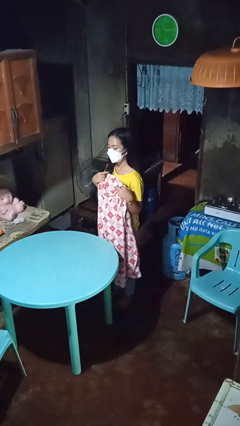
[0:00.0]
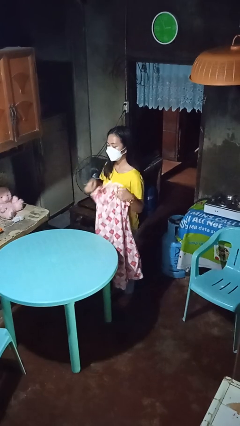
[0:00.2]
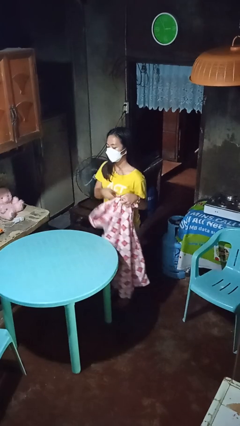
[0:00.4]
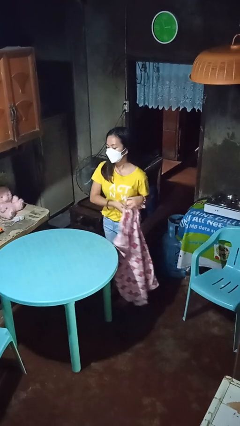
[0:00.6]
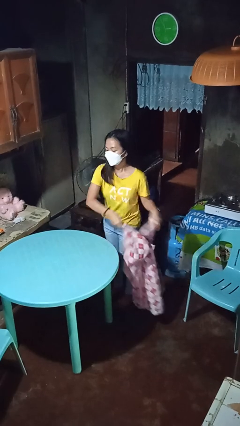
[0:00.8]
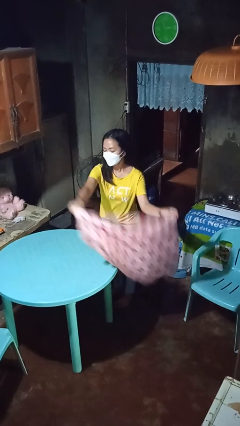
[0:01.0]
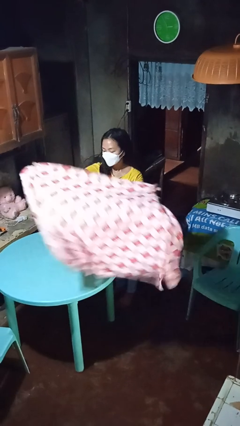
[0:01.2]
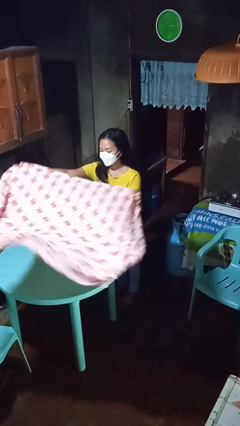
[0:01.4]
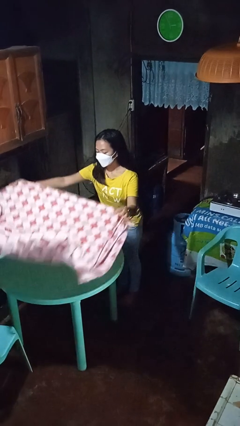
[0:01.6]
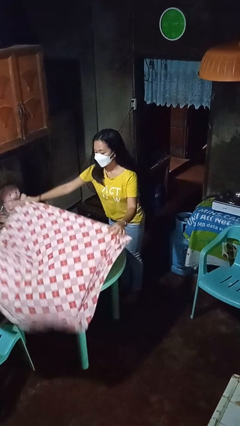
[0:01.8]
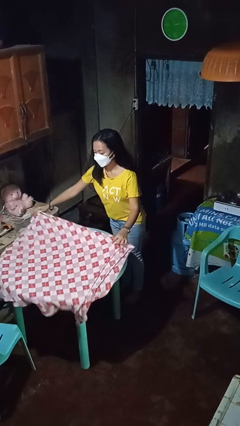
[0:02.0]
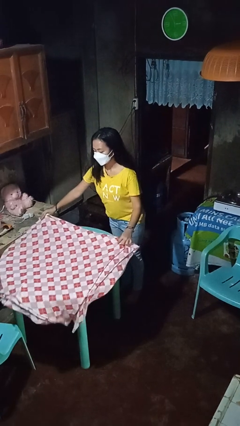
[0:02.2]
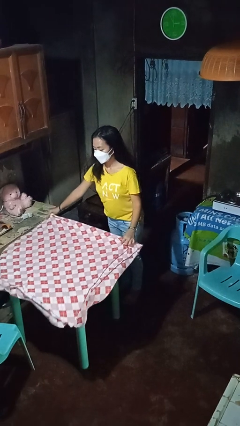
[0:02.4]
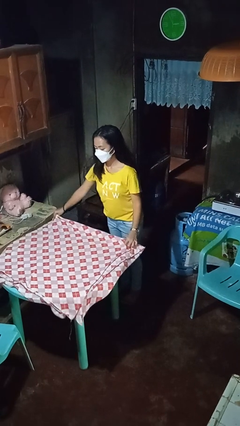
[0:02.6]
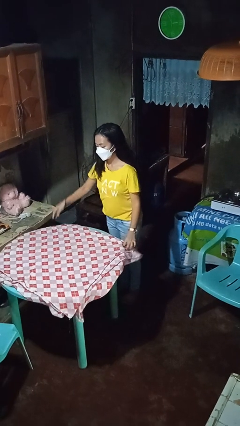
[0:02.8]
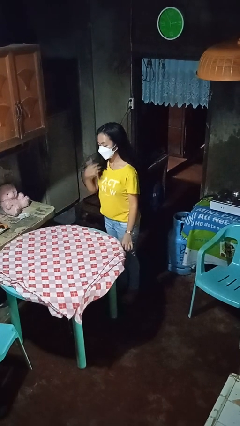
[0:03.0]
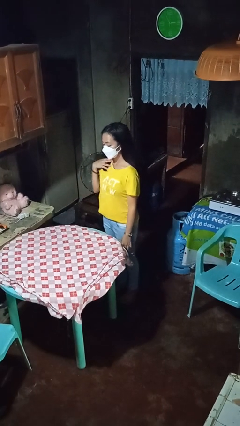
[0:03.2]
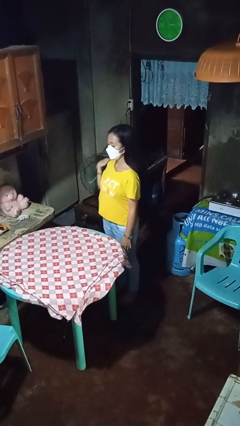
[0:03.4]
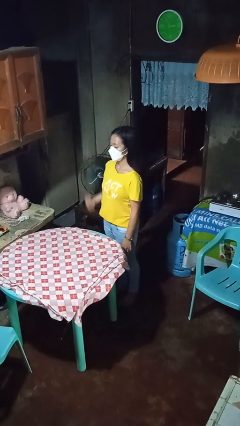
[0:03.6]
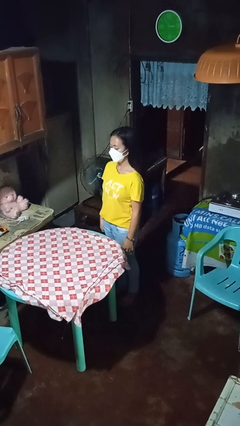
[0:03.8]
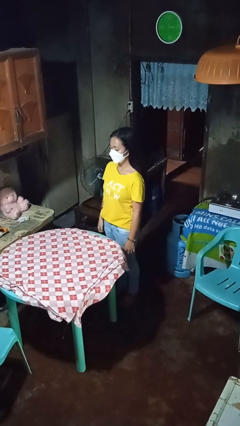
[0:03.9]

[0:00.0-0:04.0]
person spreads tablecloth

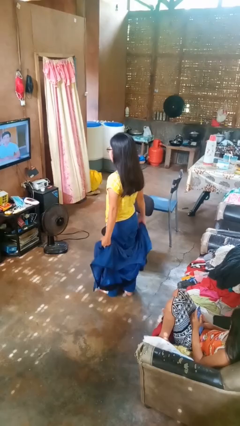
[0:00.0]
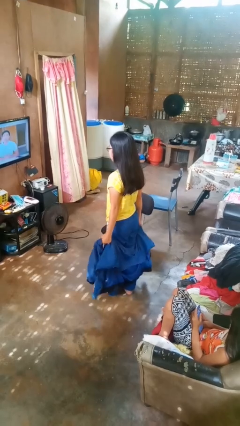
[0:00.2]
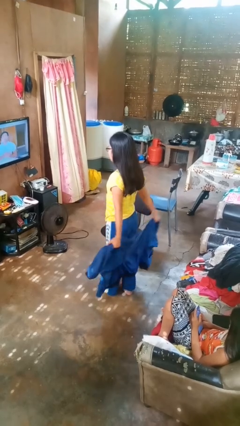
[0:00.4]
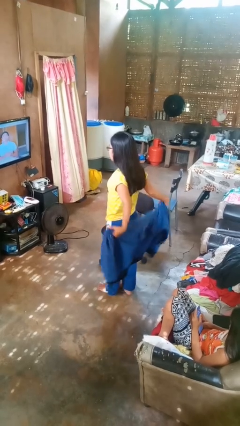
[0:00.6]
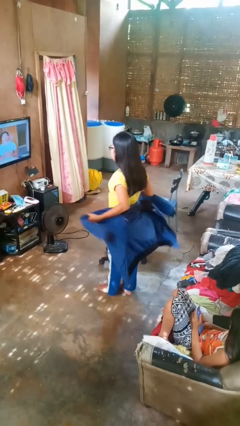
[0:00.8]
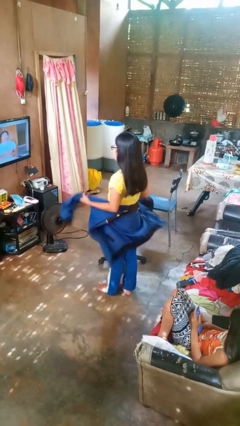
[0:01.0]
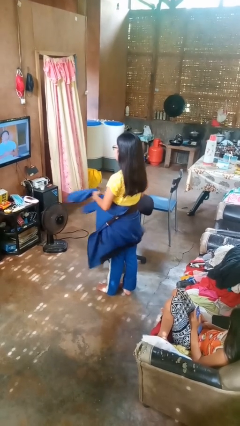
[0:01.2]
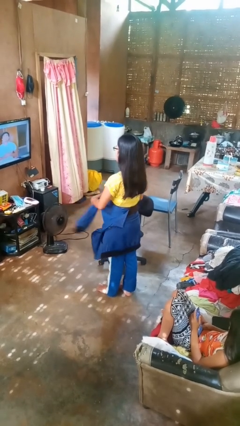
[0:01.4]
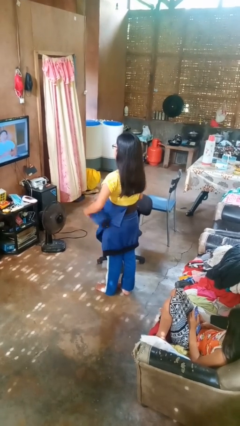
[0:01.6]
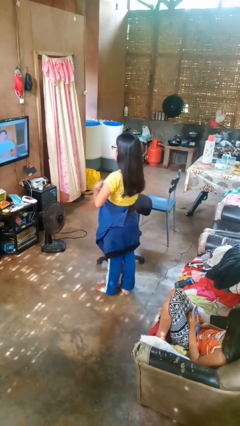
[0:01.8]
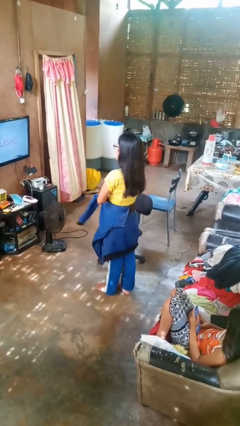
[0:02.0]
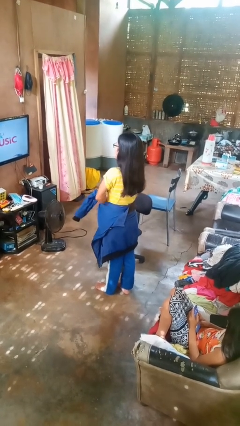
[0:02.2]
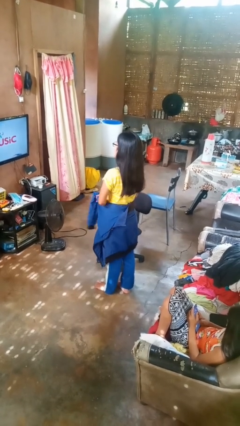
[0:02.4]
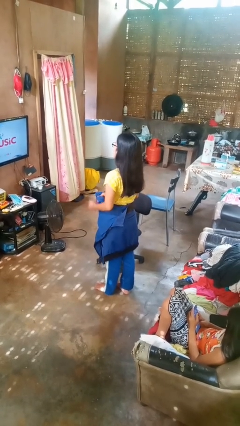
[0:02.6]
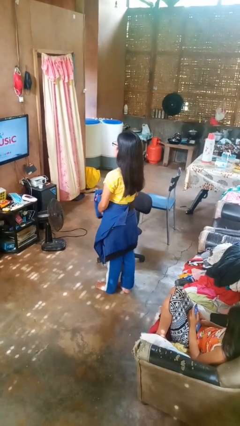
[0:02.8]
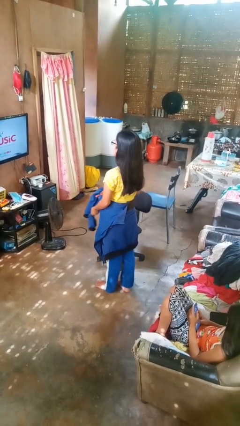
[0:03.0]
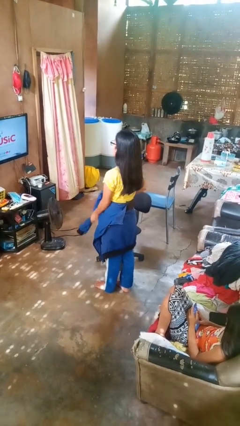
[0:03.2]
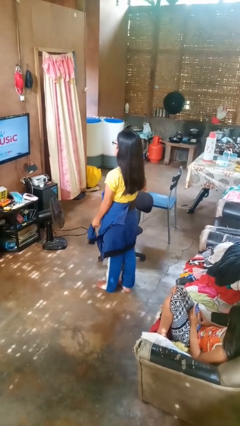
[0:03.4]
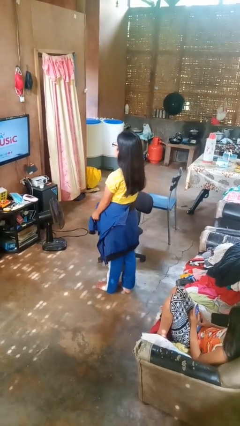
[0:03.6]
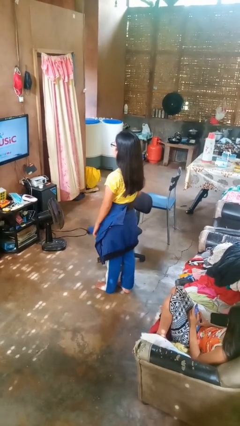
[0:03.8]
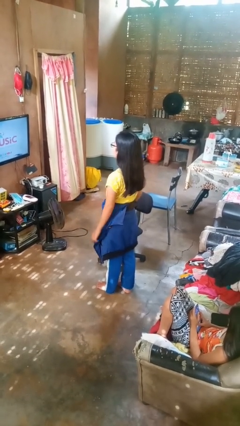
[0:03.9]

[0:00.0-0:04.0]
person ties jacket around waist

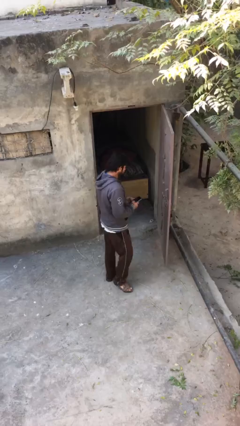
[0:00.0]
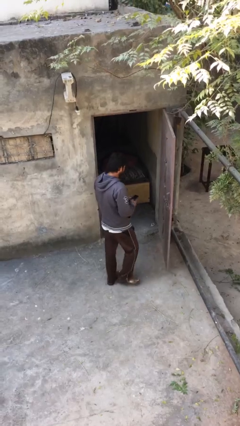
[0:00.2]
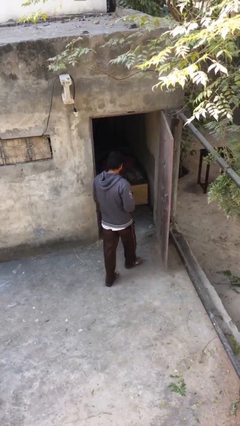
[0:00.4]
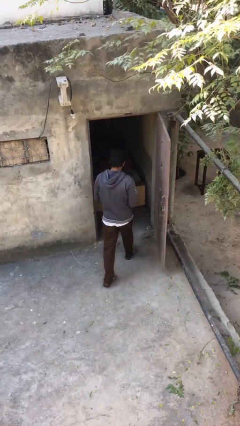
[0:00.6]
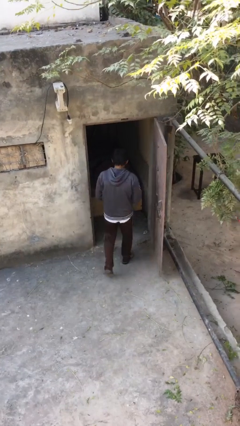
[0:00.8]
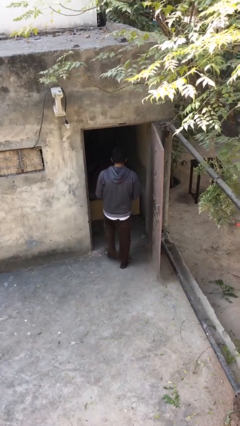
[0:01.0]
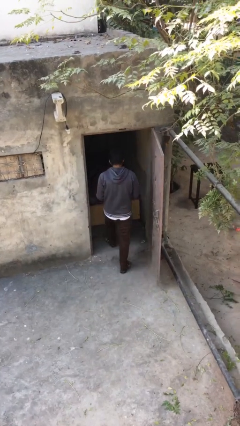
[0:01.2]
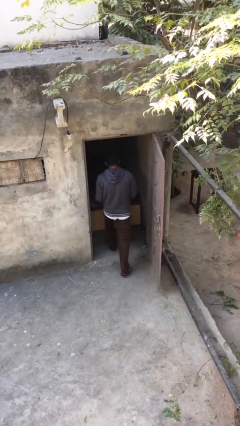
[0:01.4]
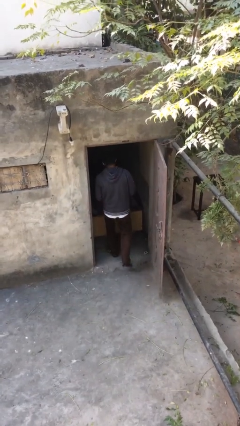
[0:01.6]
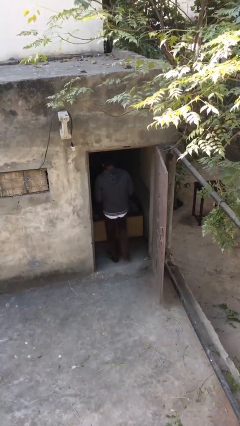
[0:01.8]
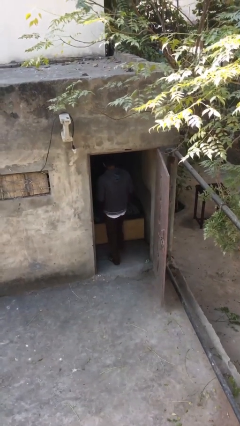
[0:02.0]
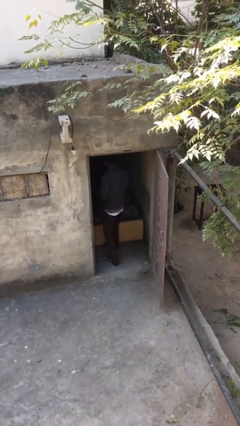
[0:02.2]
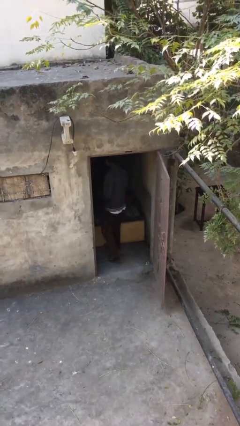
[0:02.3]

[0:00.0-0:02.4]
person exits scene through structure

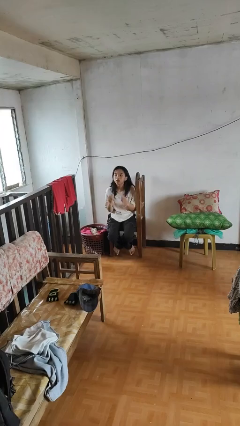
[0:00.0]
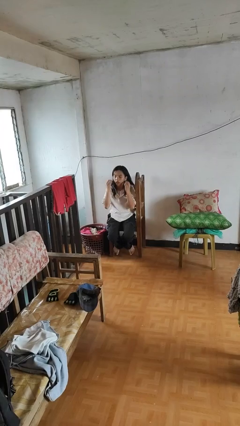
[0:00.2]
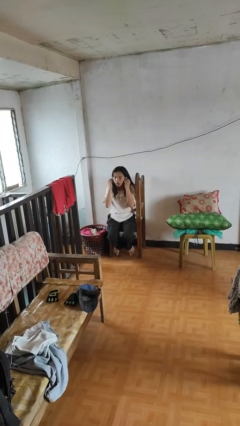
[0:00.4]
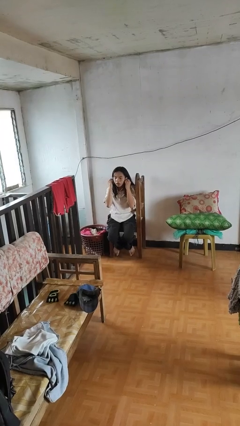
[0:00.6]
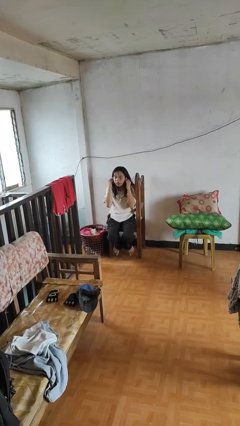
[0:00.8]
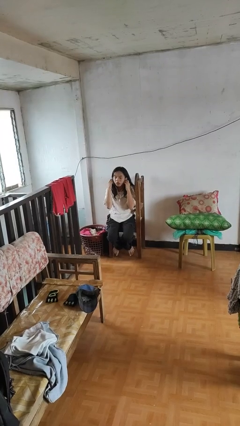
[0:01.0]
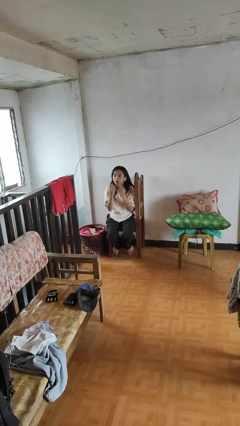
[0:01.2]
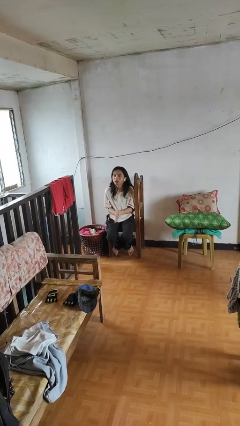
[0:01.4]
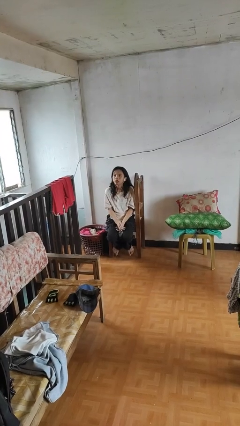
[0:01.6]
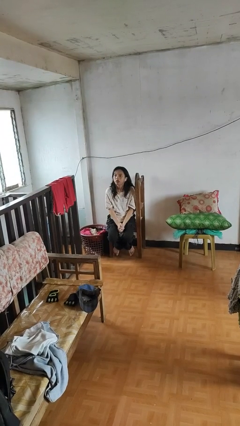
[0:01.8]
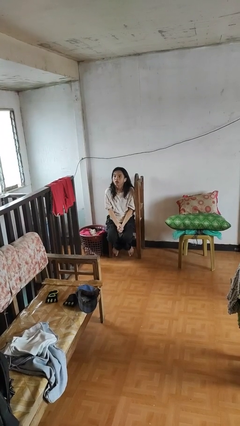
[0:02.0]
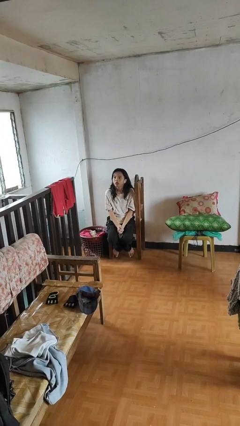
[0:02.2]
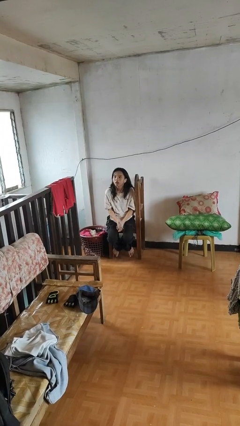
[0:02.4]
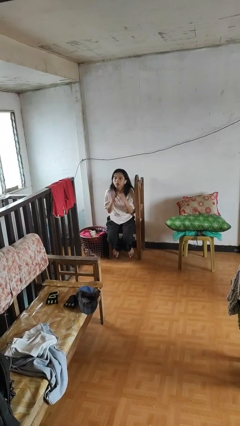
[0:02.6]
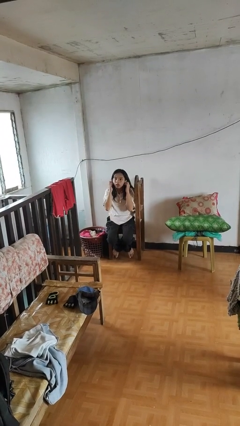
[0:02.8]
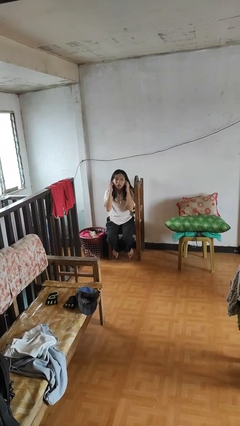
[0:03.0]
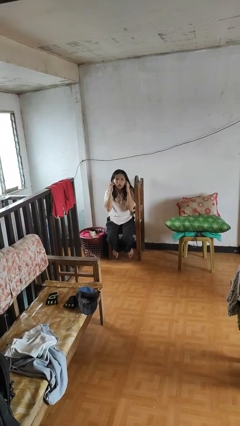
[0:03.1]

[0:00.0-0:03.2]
person puts on headphones

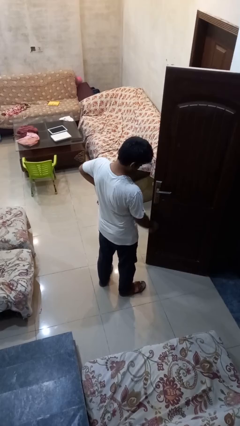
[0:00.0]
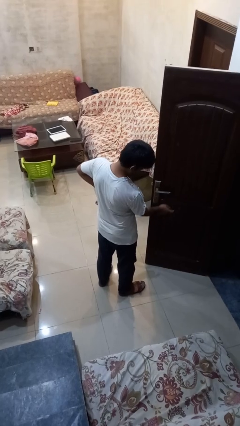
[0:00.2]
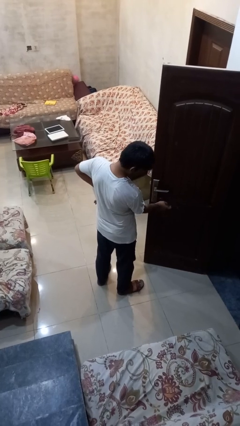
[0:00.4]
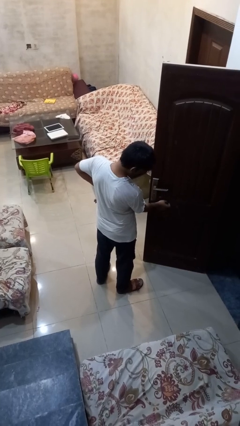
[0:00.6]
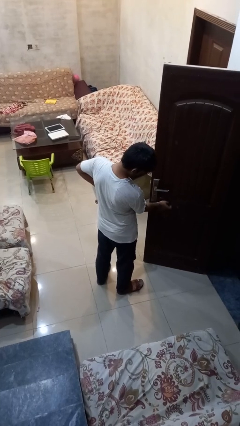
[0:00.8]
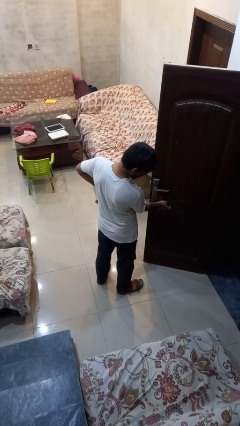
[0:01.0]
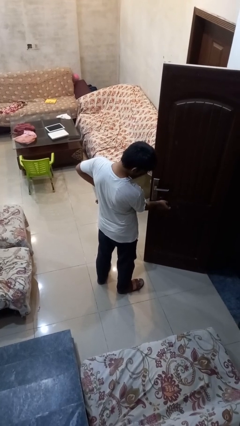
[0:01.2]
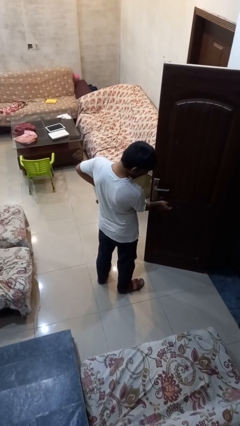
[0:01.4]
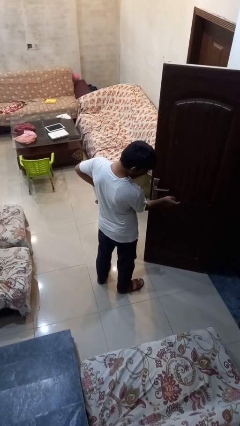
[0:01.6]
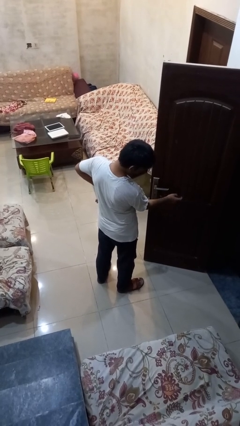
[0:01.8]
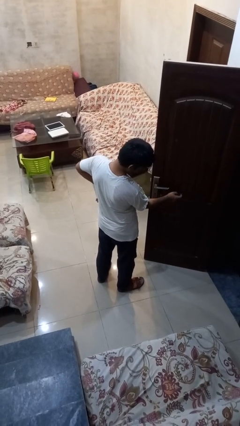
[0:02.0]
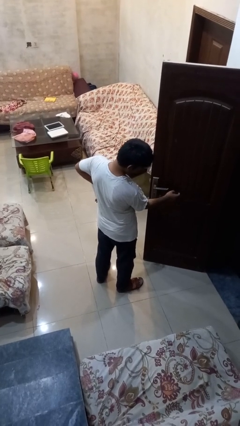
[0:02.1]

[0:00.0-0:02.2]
person taps object with finger

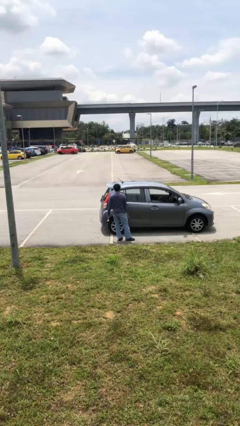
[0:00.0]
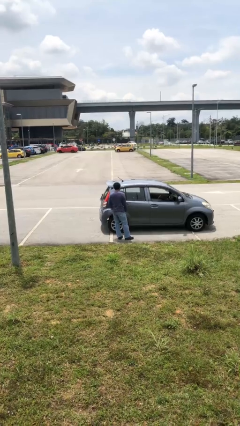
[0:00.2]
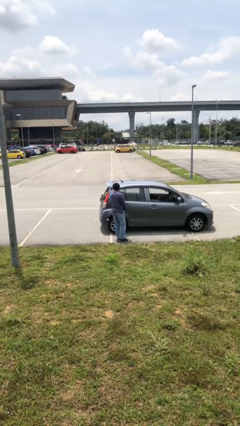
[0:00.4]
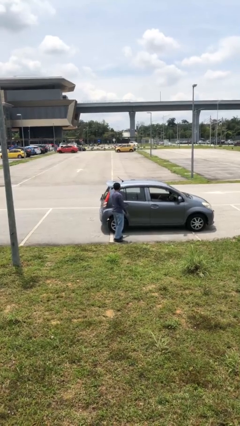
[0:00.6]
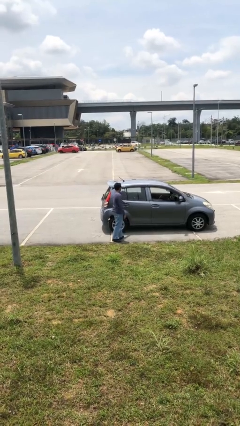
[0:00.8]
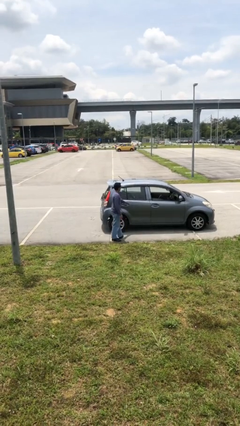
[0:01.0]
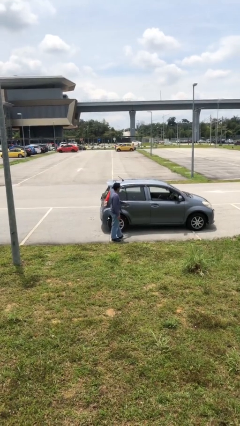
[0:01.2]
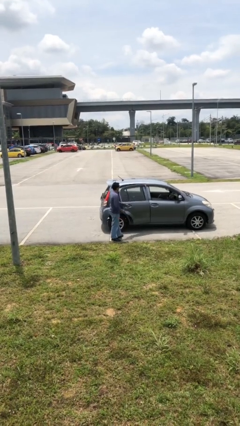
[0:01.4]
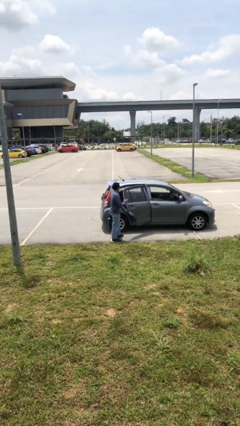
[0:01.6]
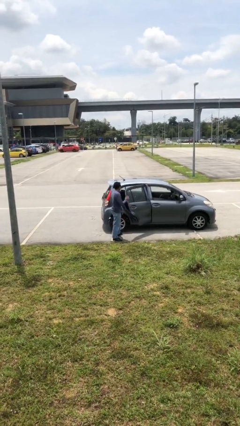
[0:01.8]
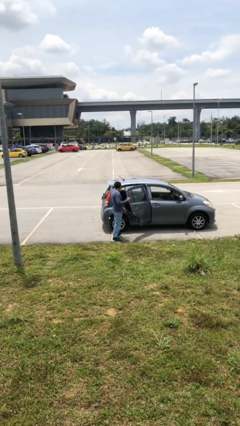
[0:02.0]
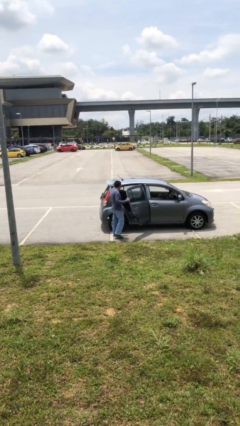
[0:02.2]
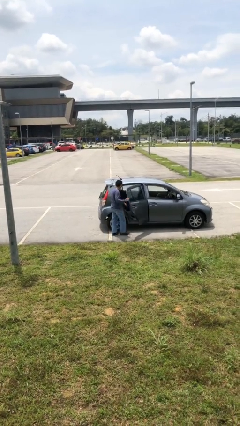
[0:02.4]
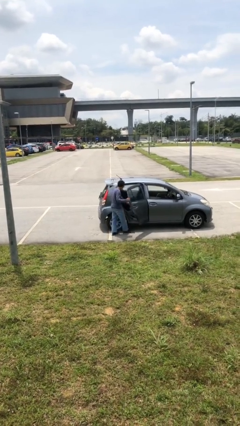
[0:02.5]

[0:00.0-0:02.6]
person opens car door
